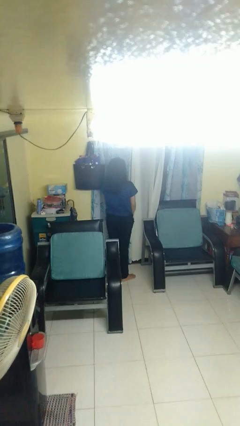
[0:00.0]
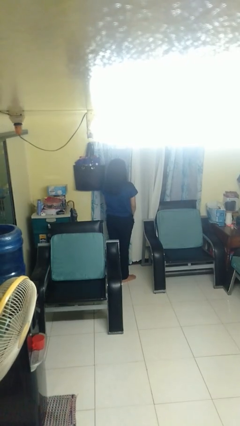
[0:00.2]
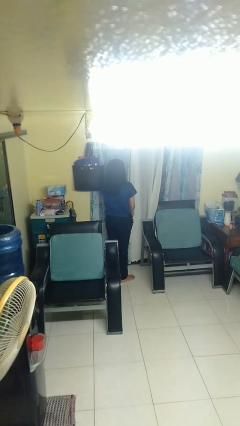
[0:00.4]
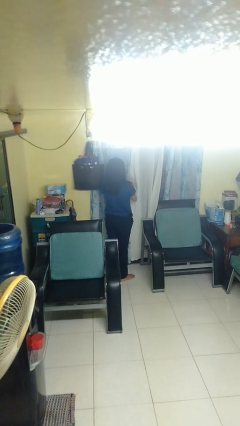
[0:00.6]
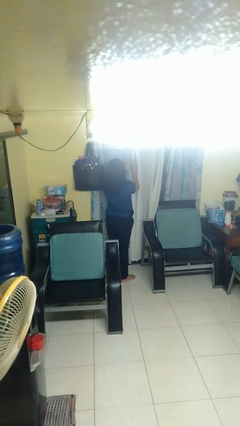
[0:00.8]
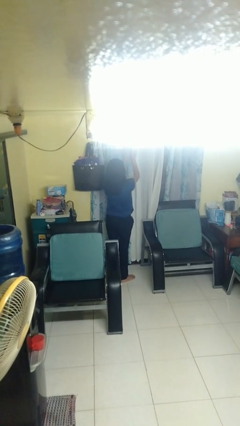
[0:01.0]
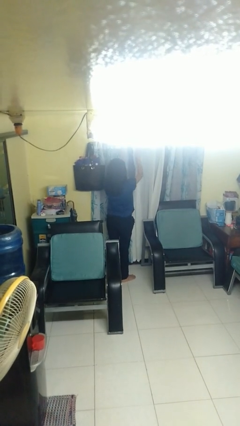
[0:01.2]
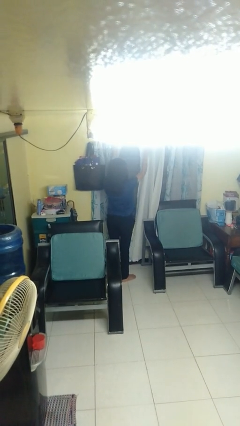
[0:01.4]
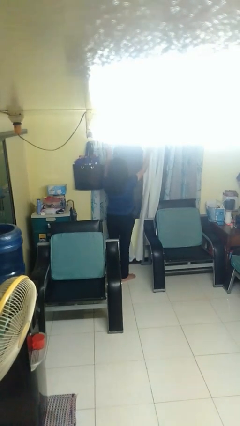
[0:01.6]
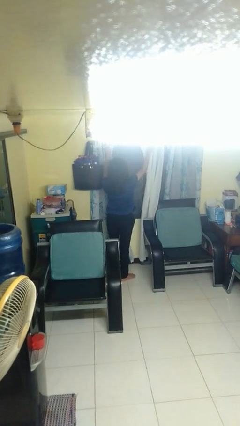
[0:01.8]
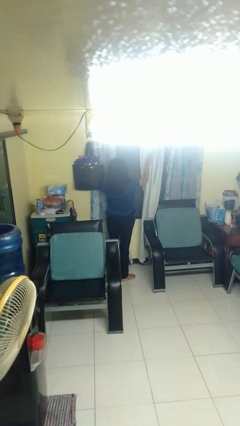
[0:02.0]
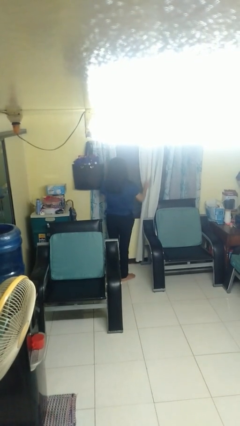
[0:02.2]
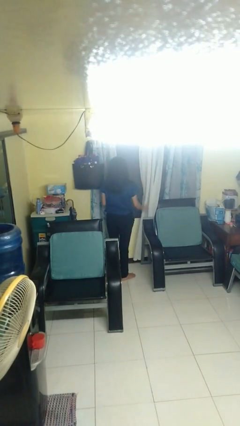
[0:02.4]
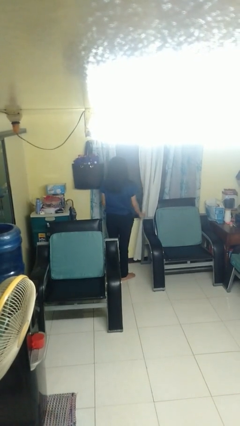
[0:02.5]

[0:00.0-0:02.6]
person opens curtains

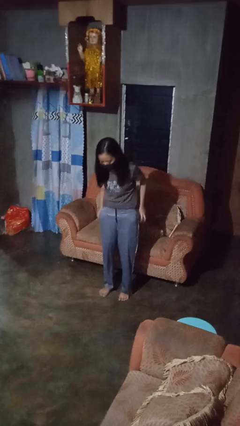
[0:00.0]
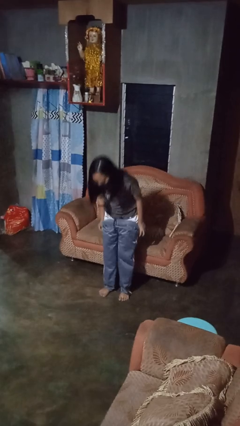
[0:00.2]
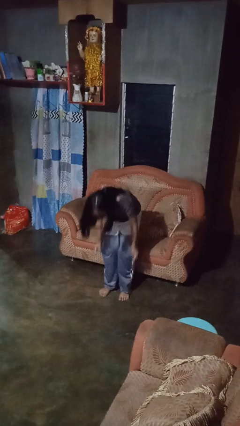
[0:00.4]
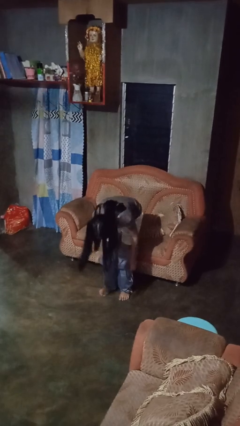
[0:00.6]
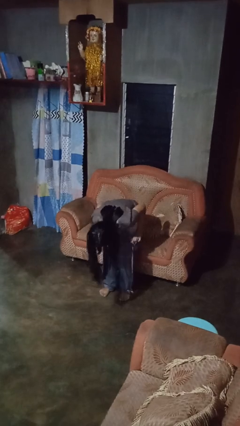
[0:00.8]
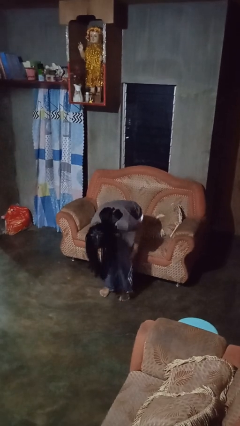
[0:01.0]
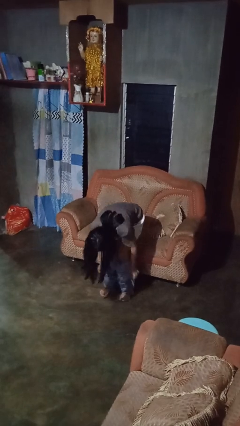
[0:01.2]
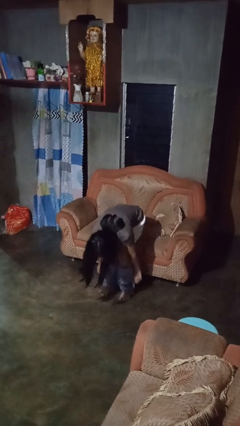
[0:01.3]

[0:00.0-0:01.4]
person takes off pants

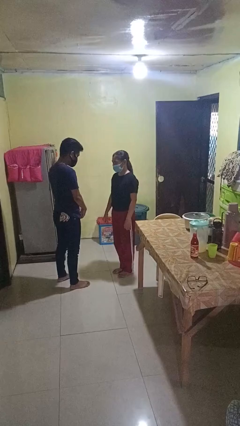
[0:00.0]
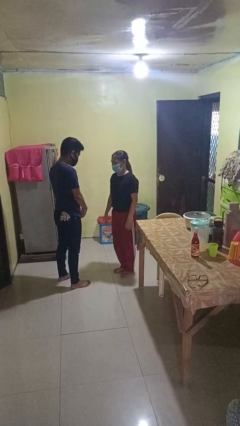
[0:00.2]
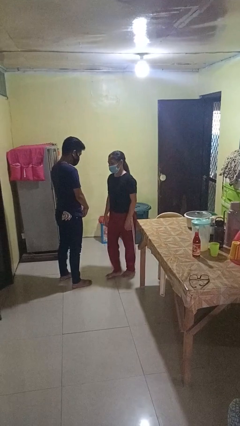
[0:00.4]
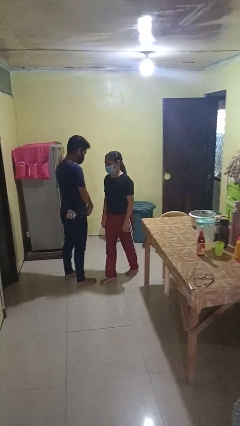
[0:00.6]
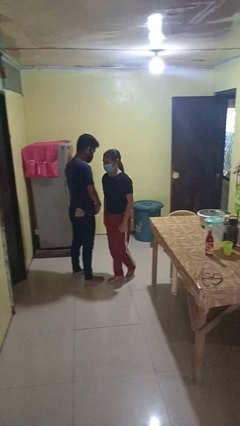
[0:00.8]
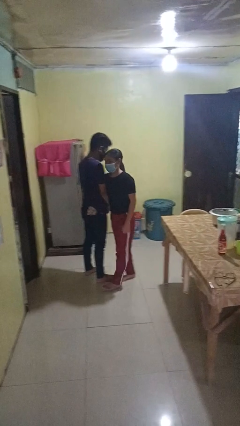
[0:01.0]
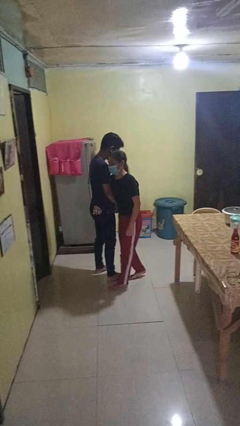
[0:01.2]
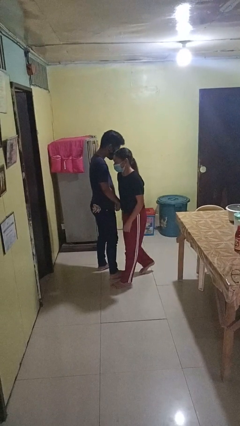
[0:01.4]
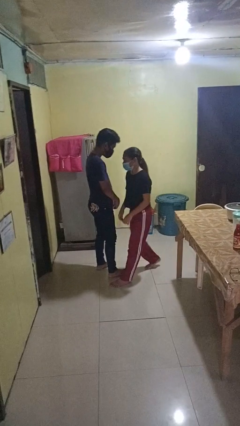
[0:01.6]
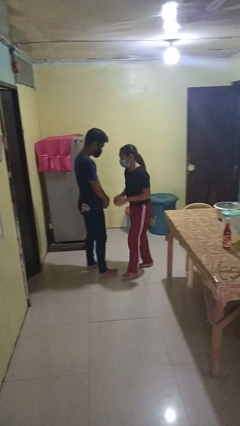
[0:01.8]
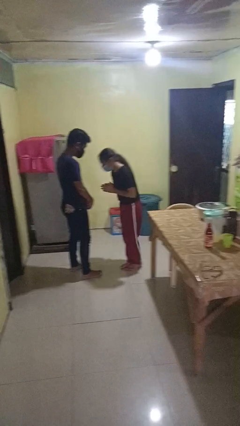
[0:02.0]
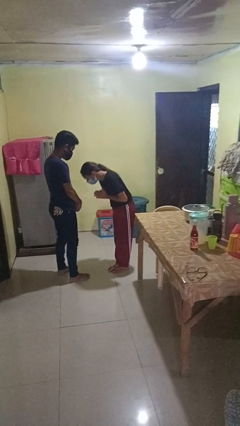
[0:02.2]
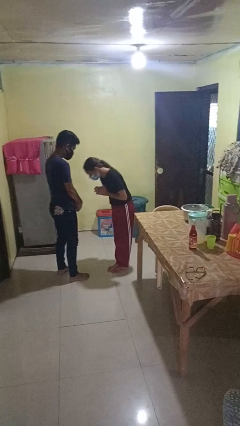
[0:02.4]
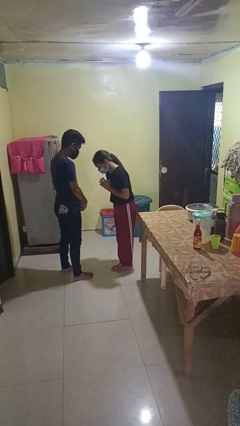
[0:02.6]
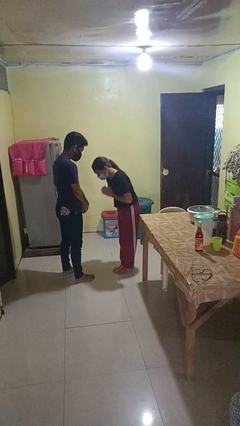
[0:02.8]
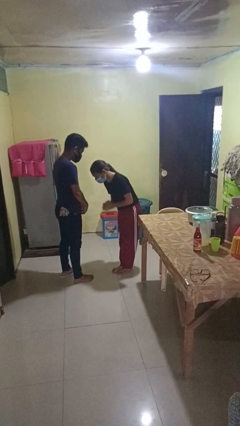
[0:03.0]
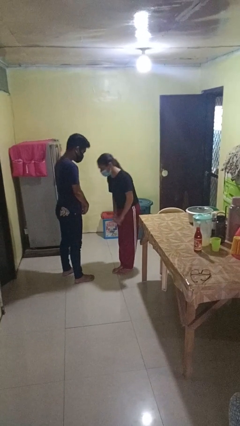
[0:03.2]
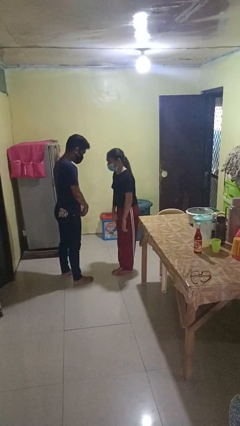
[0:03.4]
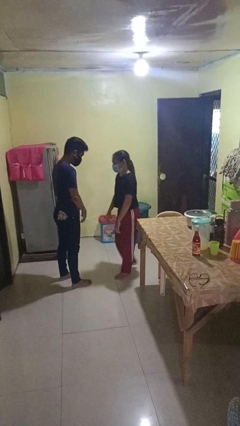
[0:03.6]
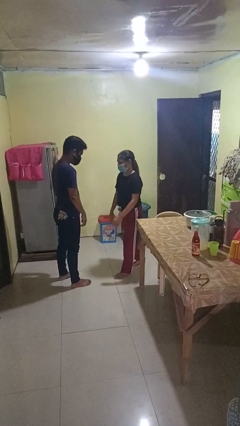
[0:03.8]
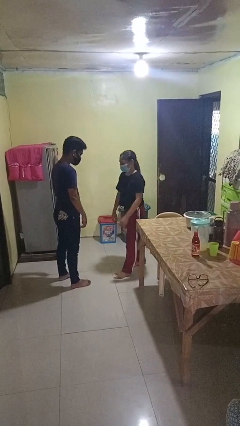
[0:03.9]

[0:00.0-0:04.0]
person bumps into person

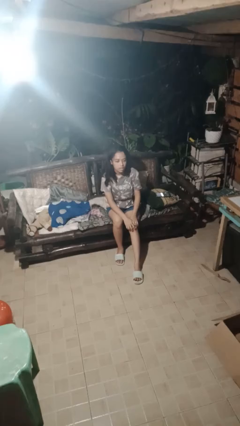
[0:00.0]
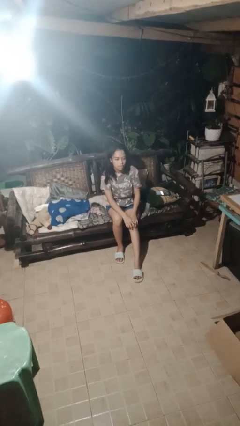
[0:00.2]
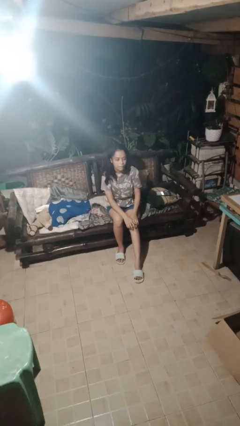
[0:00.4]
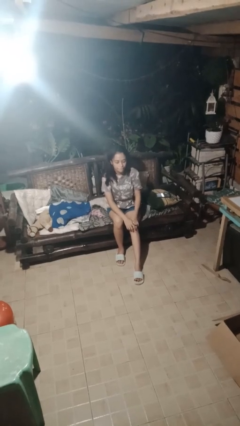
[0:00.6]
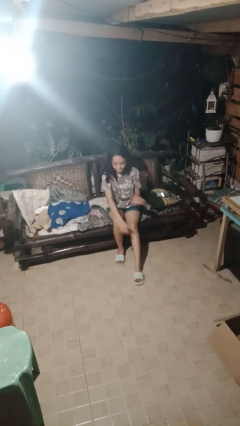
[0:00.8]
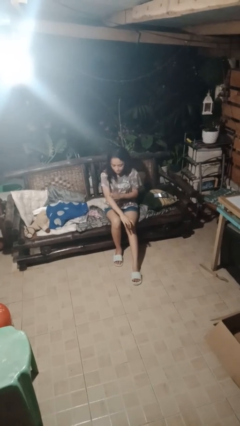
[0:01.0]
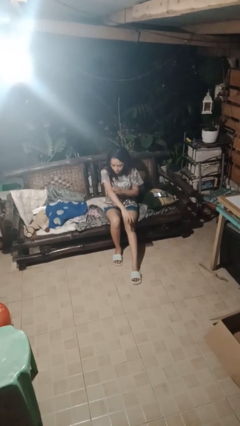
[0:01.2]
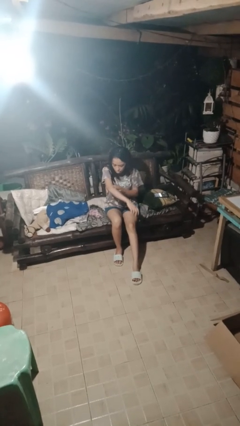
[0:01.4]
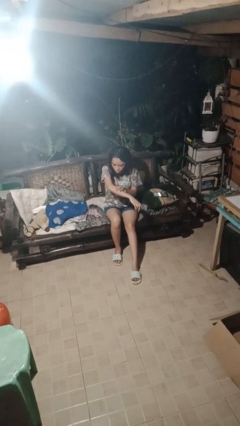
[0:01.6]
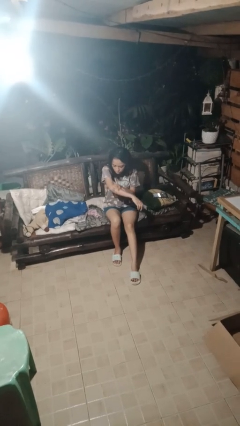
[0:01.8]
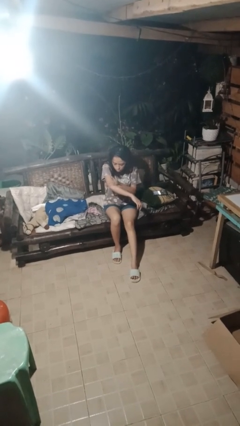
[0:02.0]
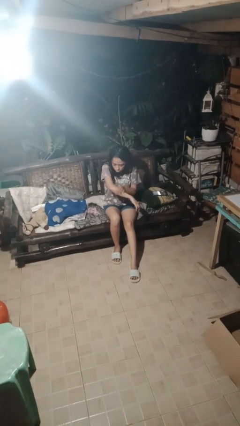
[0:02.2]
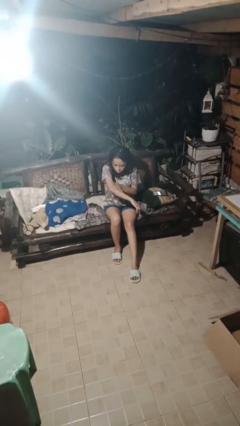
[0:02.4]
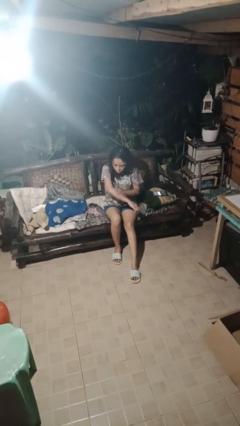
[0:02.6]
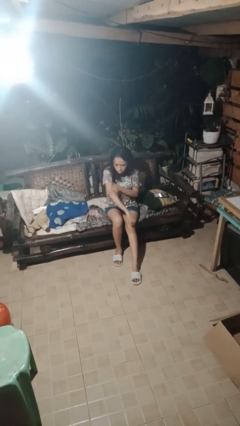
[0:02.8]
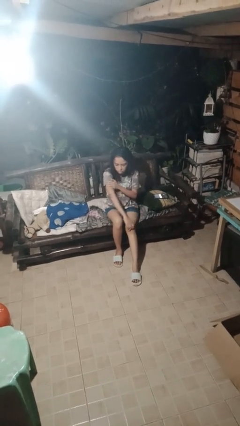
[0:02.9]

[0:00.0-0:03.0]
person swats bug

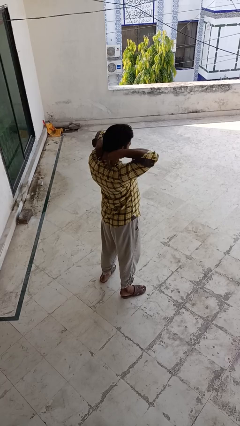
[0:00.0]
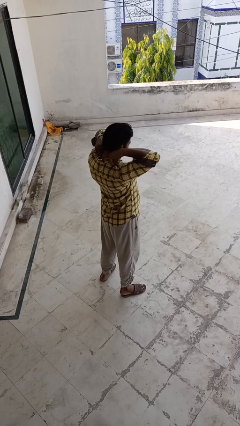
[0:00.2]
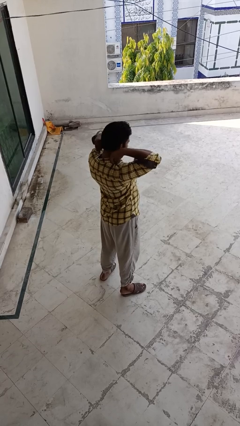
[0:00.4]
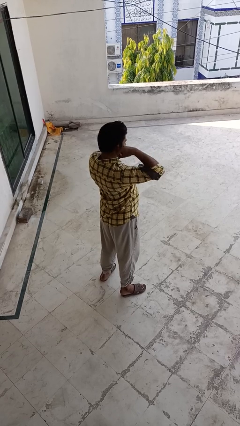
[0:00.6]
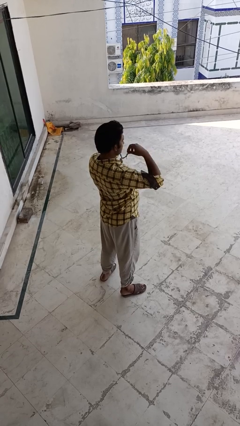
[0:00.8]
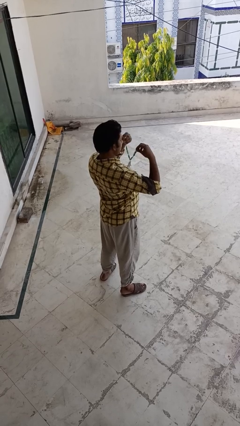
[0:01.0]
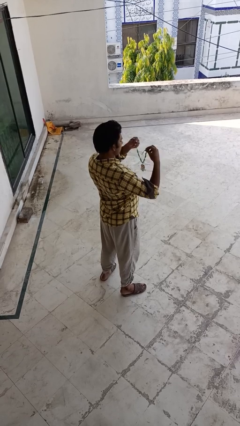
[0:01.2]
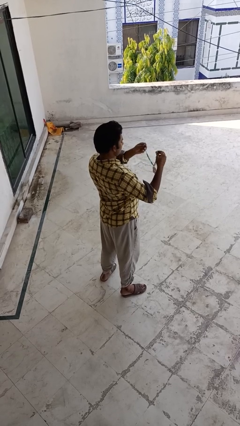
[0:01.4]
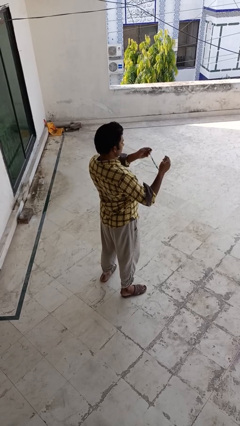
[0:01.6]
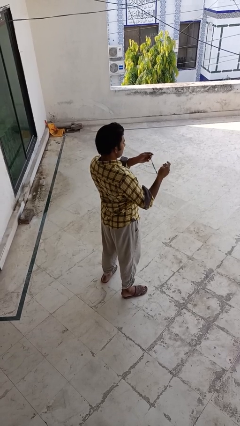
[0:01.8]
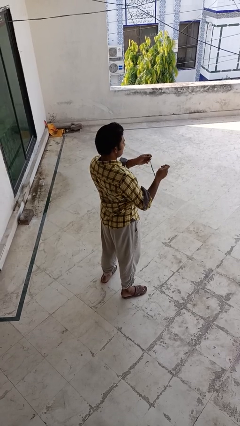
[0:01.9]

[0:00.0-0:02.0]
person takes off necklace

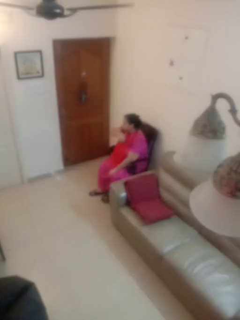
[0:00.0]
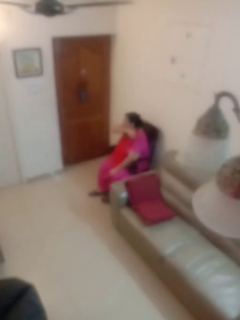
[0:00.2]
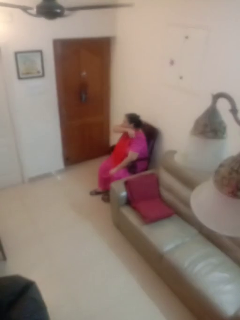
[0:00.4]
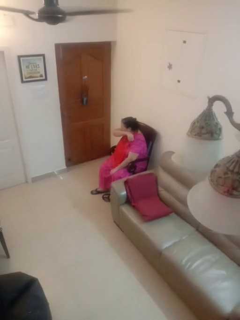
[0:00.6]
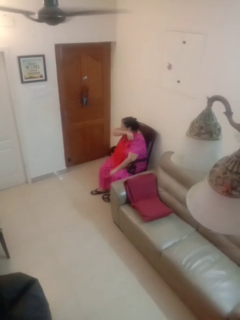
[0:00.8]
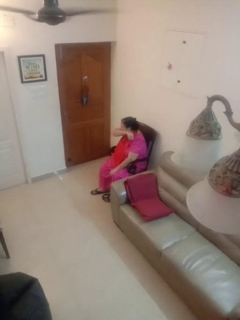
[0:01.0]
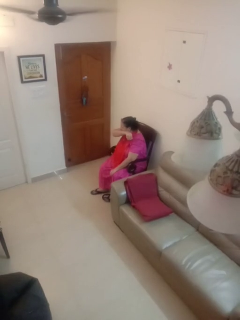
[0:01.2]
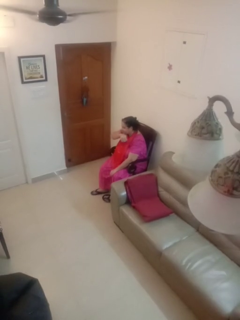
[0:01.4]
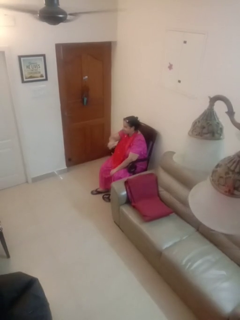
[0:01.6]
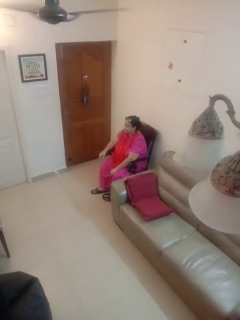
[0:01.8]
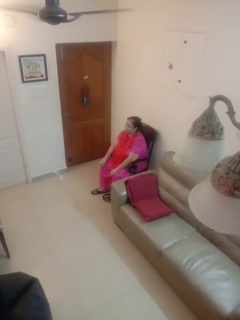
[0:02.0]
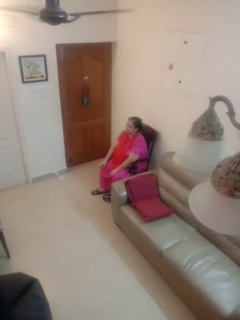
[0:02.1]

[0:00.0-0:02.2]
person sneezes into arm

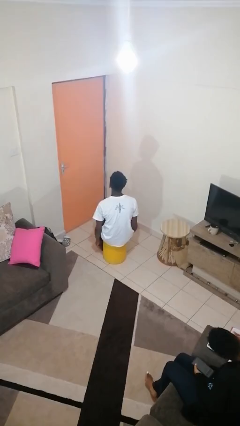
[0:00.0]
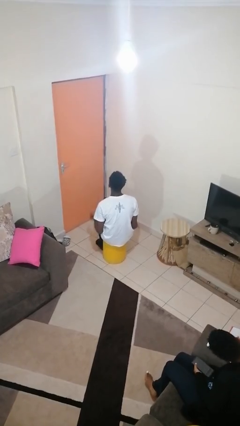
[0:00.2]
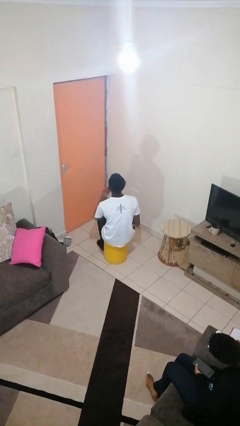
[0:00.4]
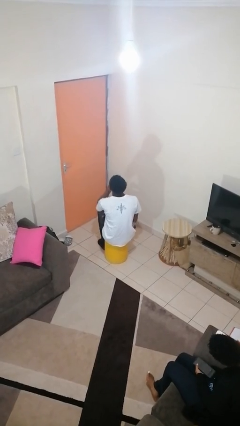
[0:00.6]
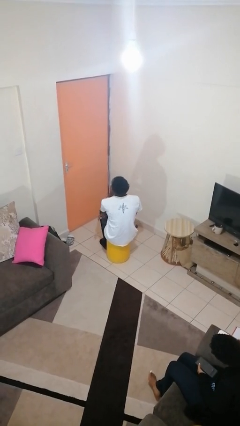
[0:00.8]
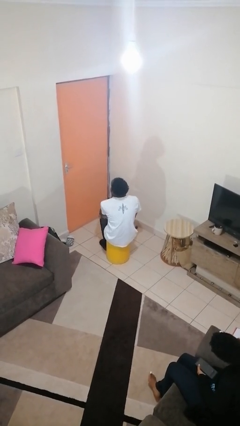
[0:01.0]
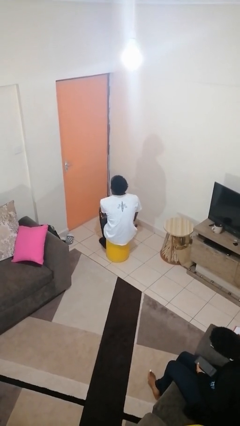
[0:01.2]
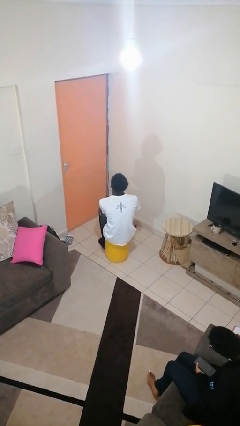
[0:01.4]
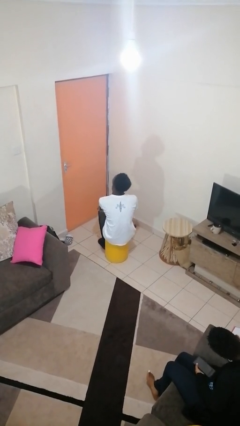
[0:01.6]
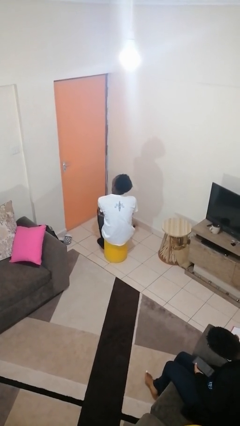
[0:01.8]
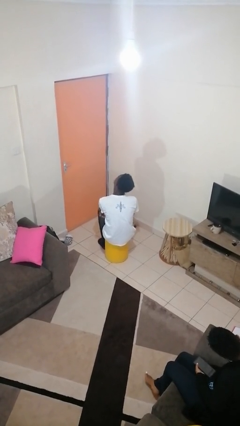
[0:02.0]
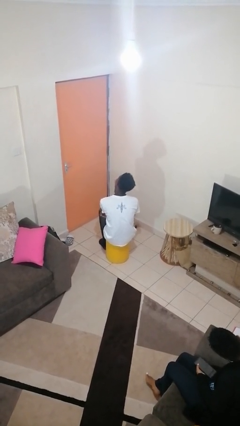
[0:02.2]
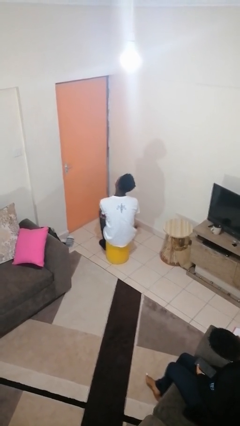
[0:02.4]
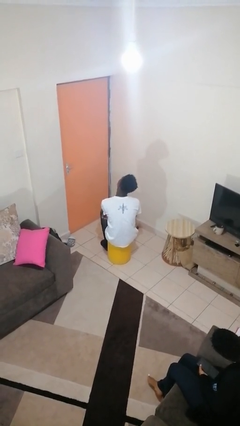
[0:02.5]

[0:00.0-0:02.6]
person strokes chin
